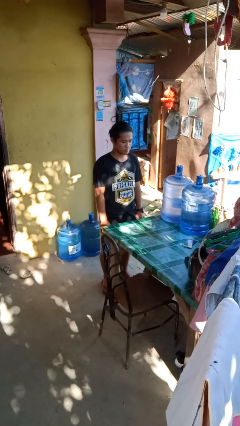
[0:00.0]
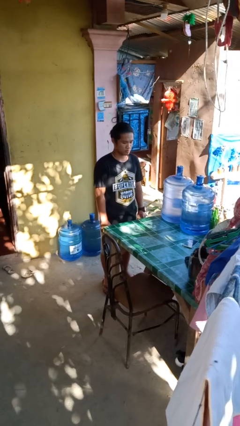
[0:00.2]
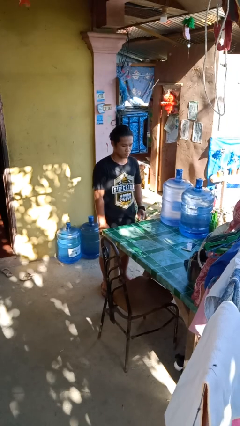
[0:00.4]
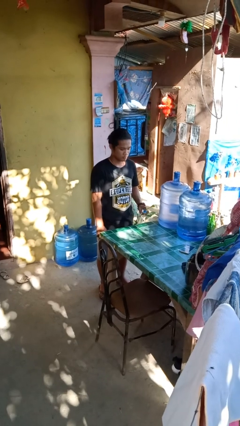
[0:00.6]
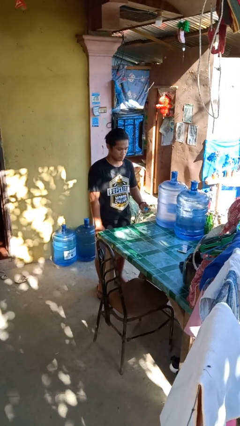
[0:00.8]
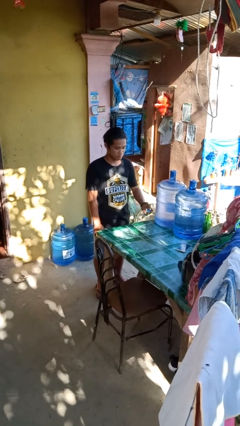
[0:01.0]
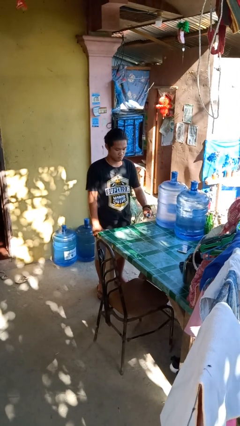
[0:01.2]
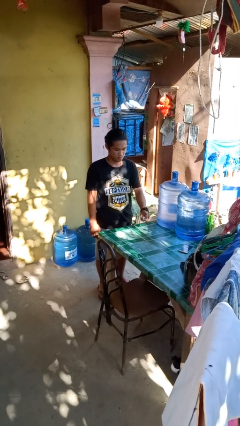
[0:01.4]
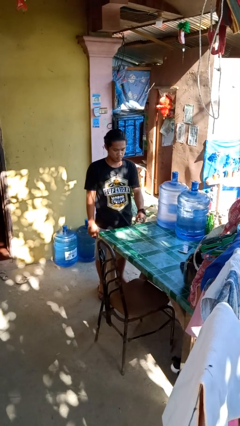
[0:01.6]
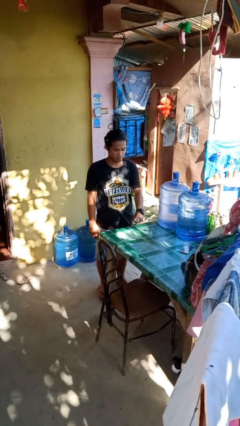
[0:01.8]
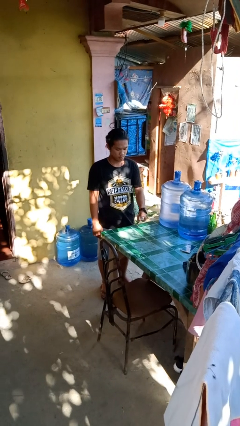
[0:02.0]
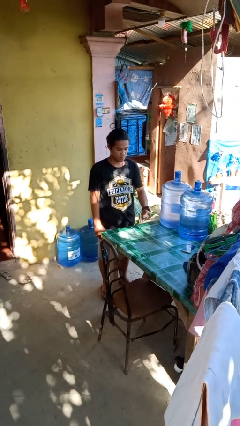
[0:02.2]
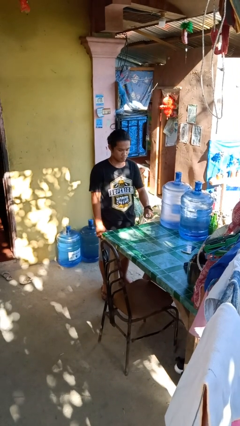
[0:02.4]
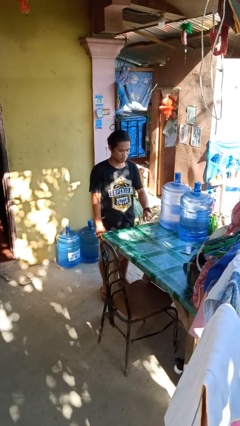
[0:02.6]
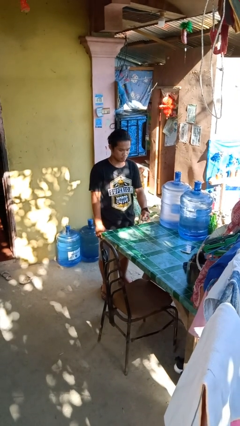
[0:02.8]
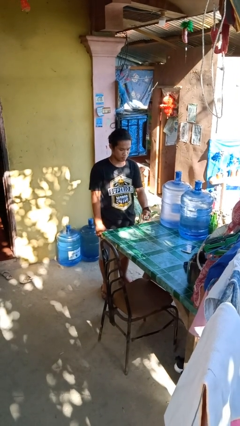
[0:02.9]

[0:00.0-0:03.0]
person sprays from bottle

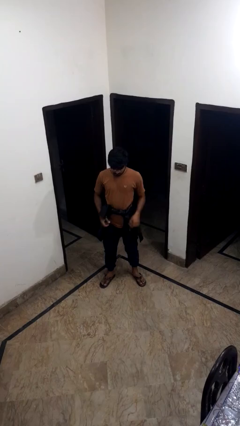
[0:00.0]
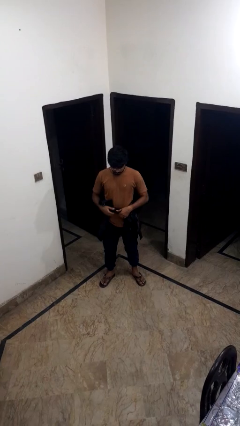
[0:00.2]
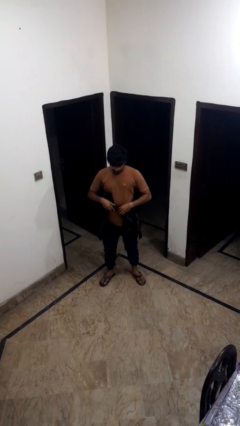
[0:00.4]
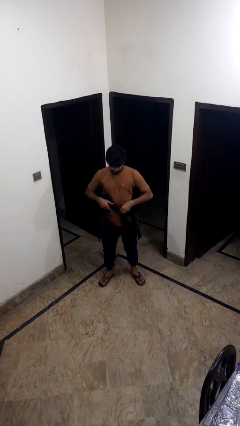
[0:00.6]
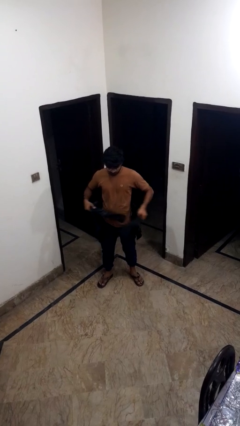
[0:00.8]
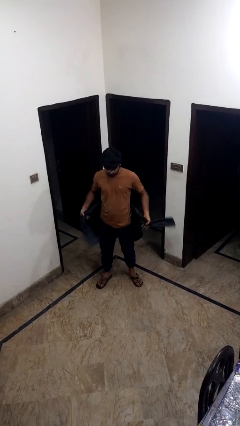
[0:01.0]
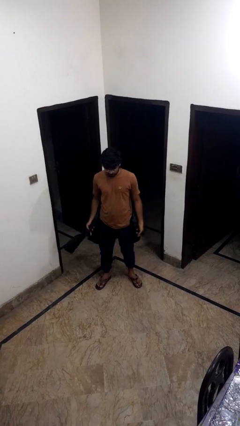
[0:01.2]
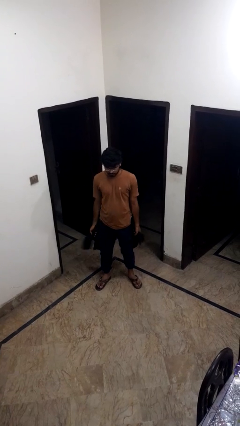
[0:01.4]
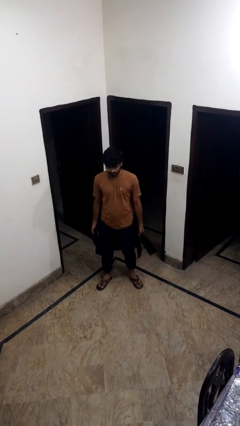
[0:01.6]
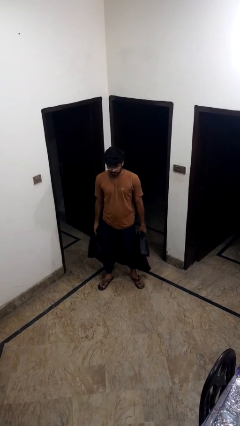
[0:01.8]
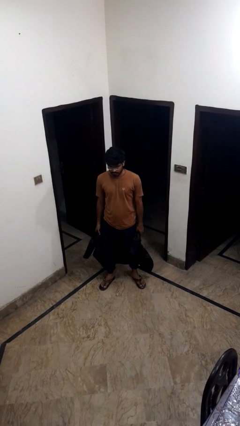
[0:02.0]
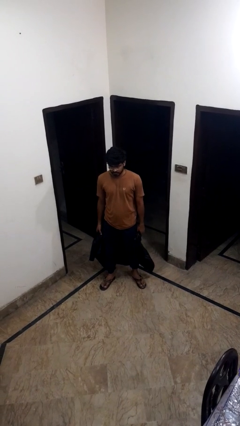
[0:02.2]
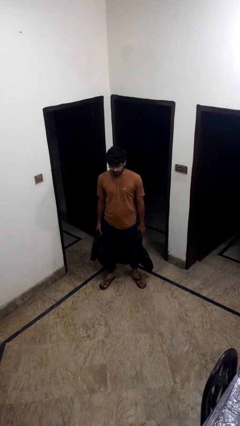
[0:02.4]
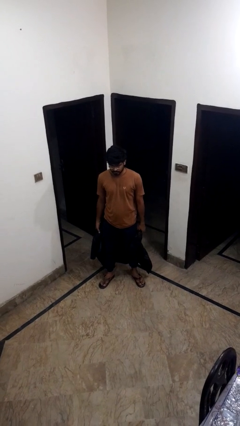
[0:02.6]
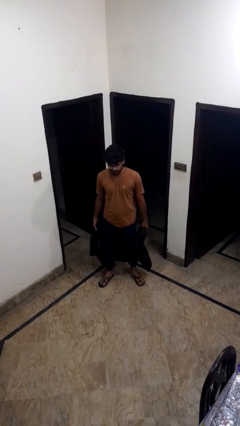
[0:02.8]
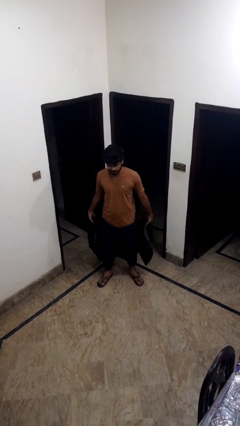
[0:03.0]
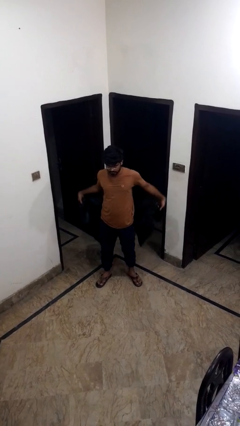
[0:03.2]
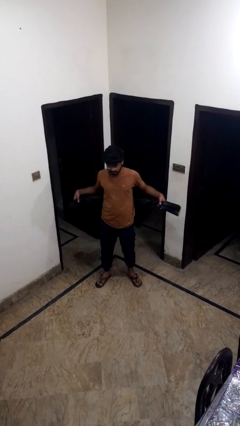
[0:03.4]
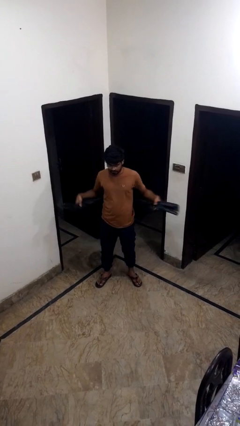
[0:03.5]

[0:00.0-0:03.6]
person carries bicycle

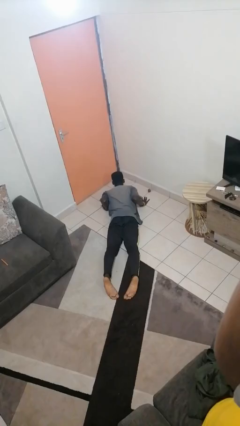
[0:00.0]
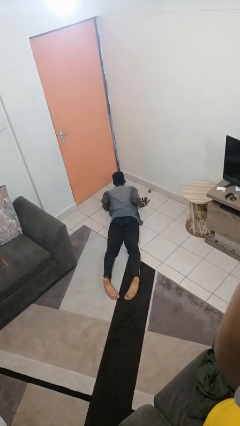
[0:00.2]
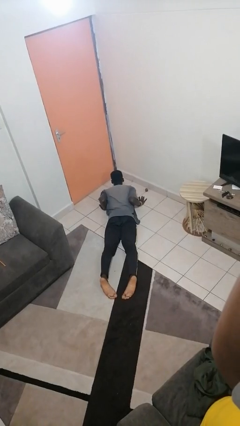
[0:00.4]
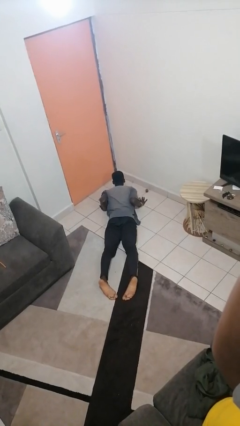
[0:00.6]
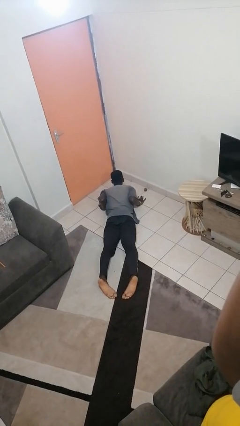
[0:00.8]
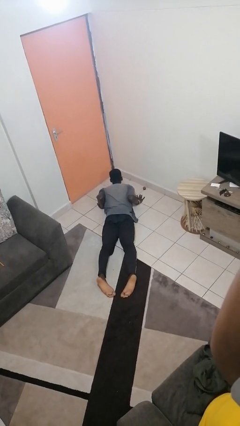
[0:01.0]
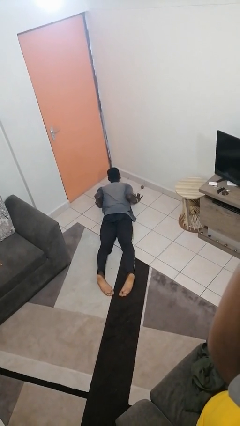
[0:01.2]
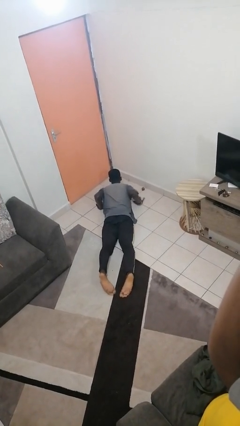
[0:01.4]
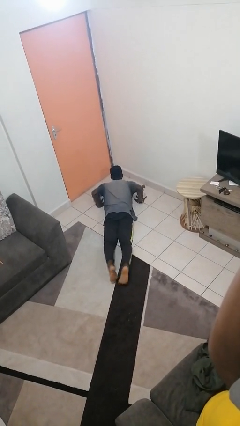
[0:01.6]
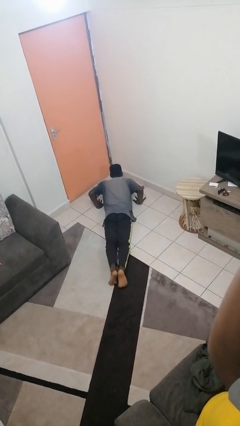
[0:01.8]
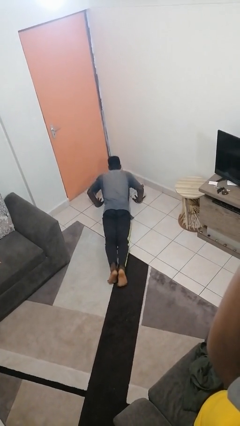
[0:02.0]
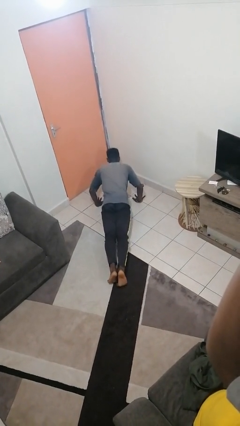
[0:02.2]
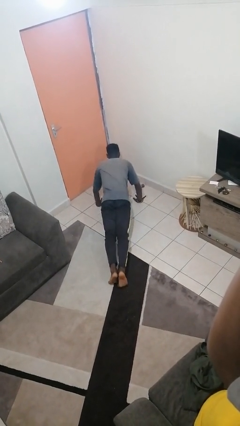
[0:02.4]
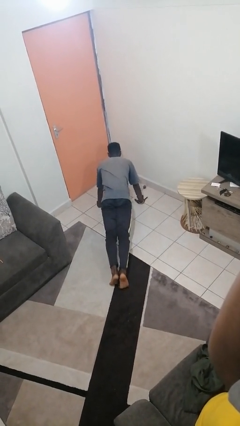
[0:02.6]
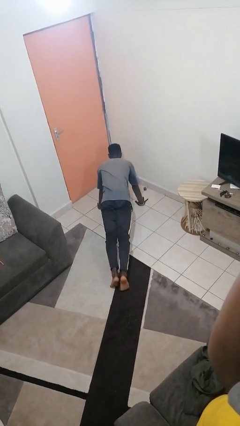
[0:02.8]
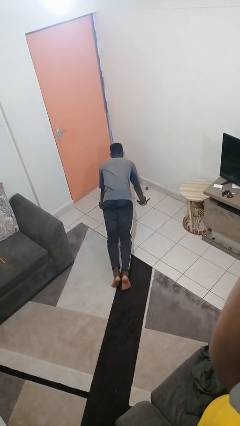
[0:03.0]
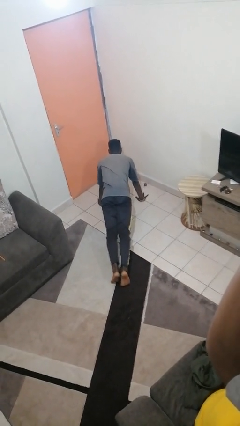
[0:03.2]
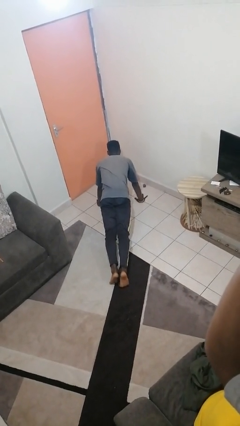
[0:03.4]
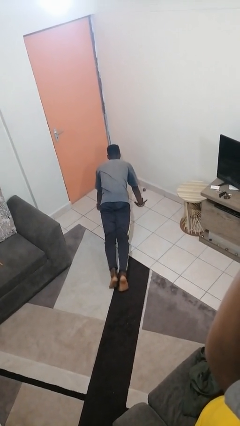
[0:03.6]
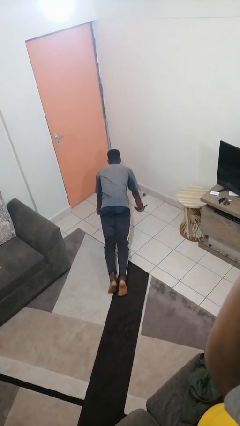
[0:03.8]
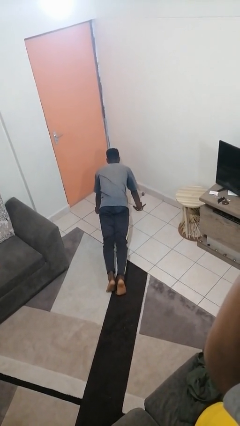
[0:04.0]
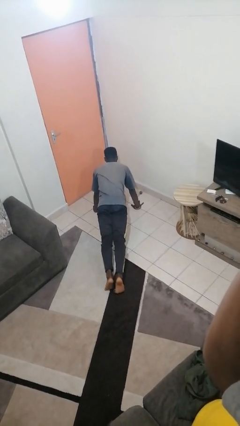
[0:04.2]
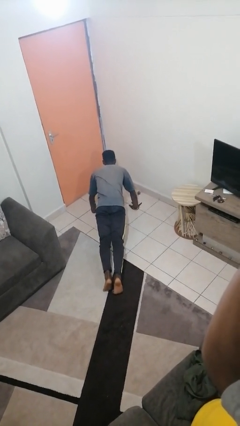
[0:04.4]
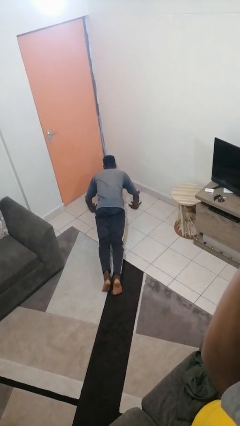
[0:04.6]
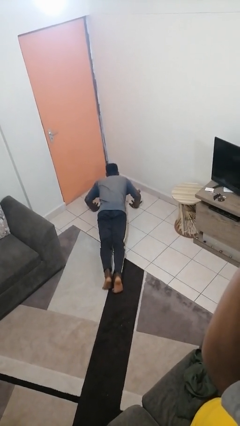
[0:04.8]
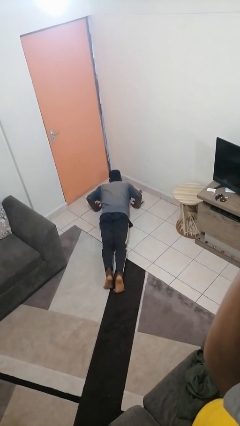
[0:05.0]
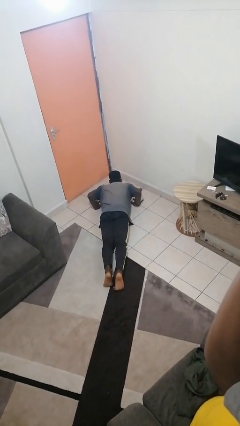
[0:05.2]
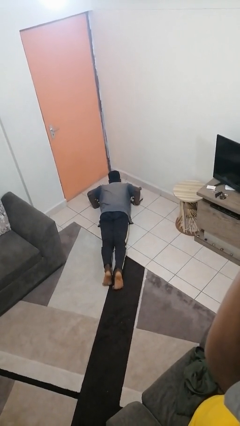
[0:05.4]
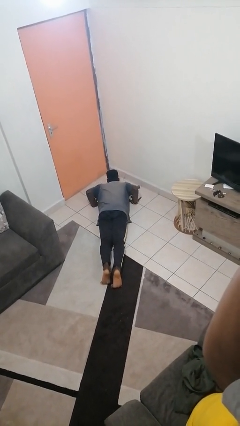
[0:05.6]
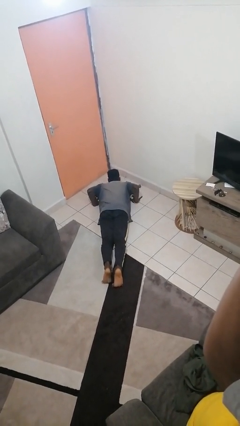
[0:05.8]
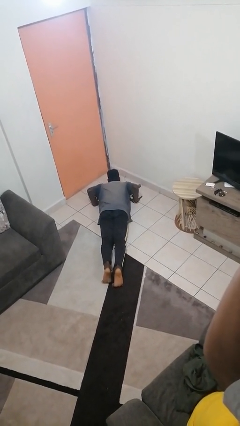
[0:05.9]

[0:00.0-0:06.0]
person exercises with pushup

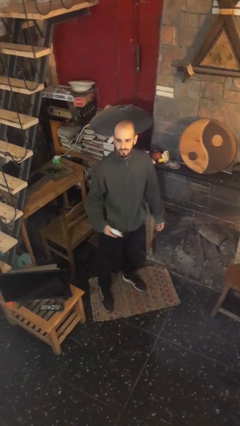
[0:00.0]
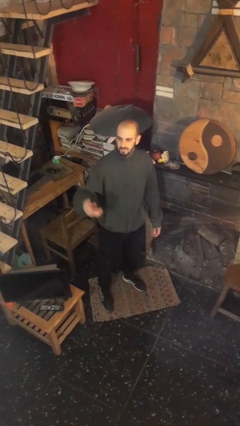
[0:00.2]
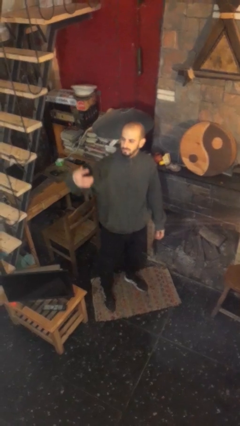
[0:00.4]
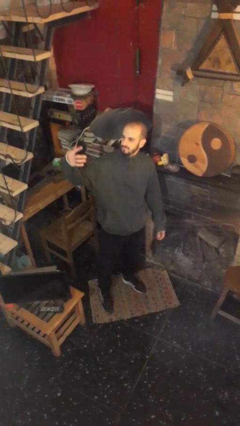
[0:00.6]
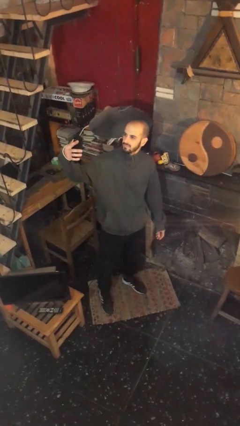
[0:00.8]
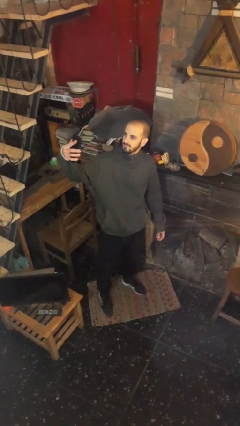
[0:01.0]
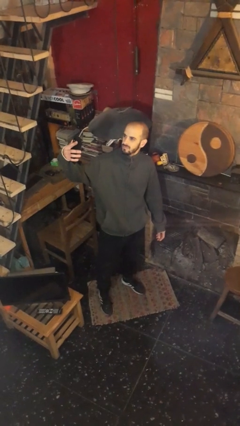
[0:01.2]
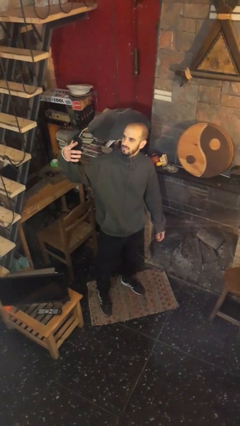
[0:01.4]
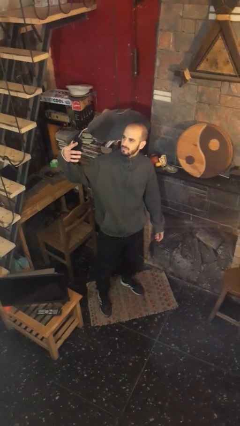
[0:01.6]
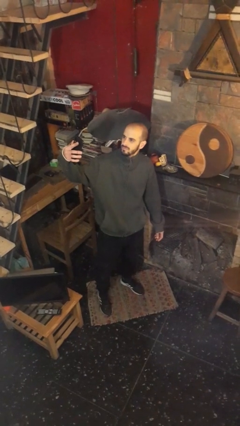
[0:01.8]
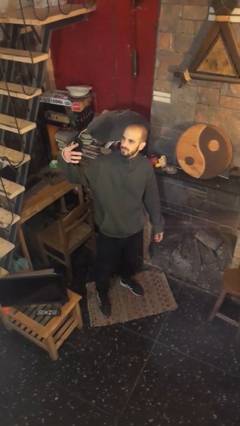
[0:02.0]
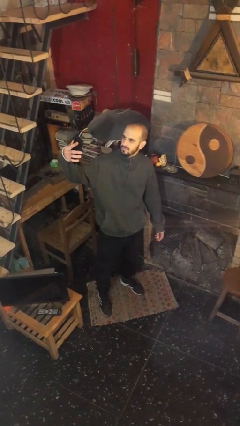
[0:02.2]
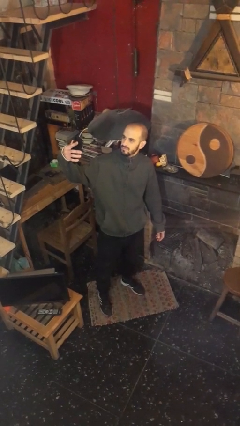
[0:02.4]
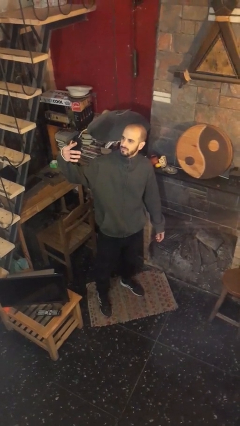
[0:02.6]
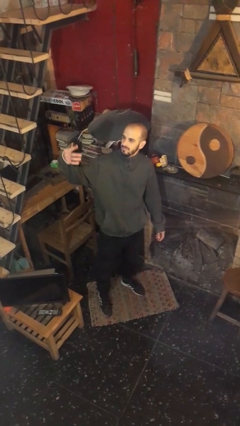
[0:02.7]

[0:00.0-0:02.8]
person takes selfie

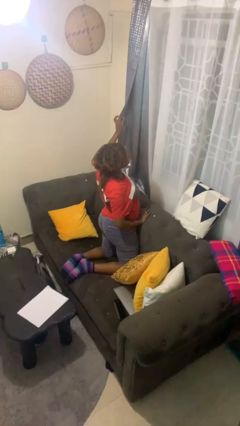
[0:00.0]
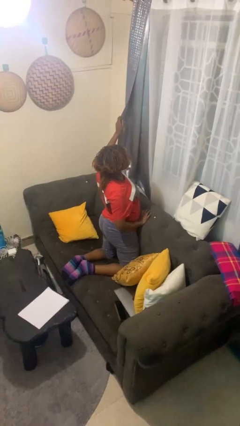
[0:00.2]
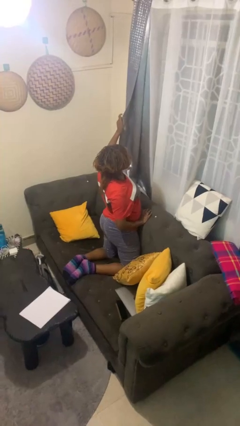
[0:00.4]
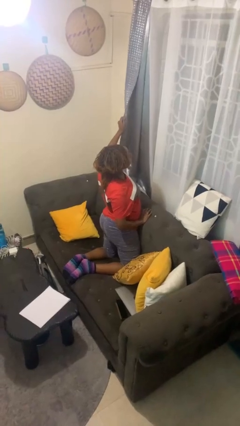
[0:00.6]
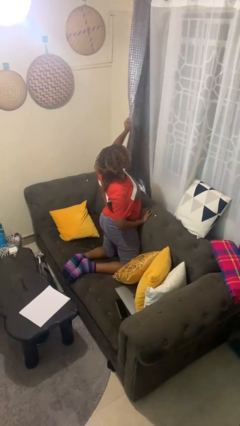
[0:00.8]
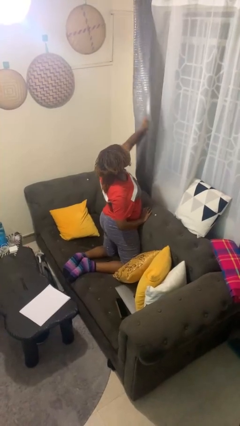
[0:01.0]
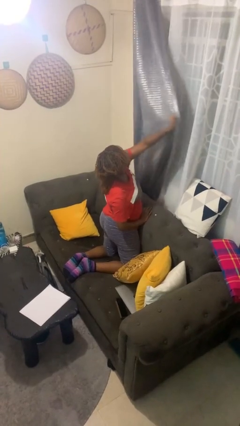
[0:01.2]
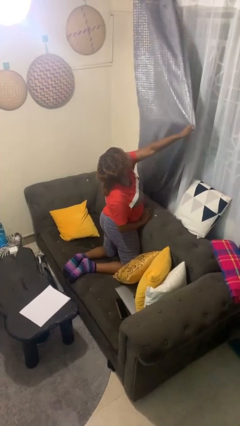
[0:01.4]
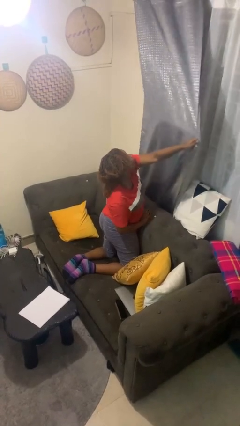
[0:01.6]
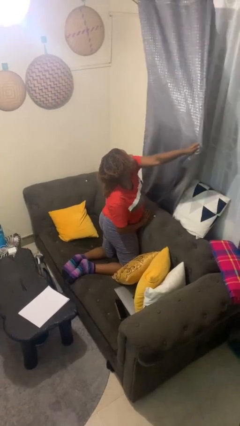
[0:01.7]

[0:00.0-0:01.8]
person closes curtains

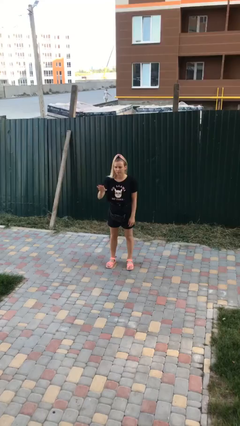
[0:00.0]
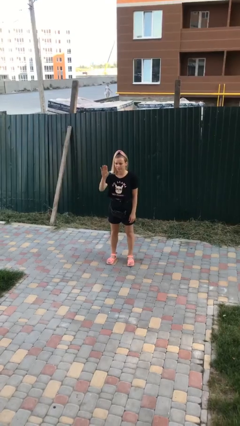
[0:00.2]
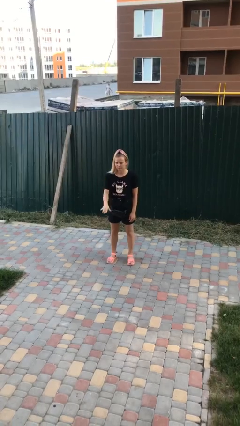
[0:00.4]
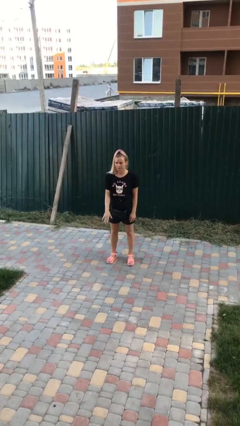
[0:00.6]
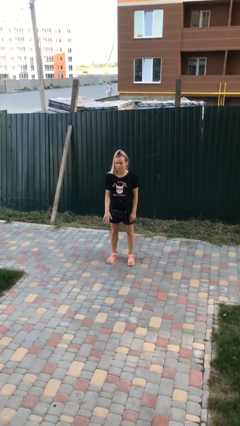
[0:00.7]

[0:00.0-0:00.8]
person gestures swipe down
